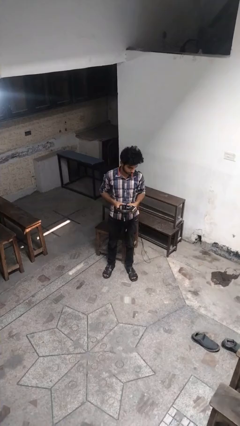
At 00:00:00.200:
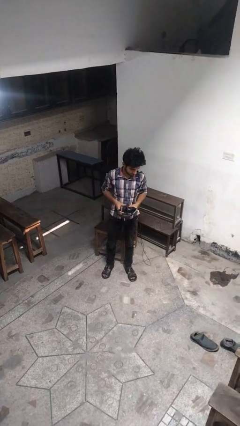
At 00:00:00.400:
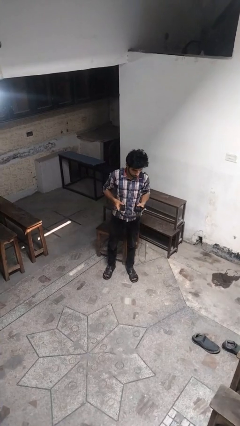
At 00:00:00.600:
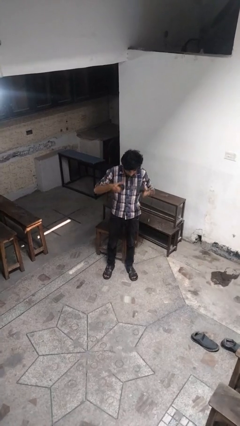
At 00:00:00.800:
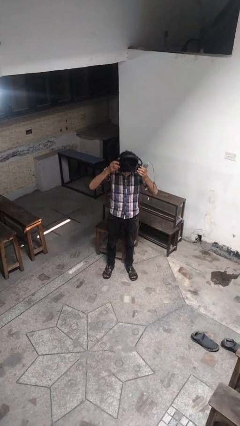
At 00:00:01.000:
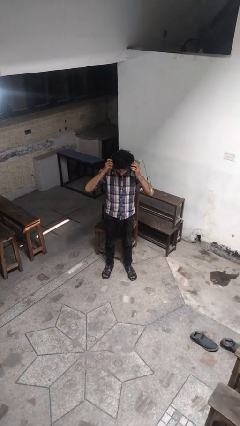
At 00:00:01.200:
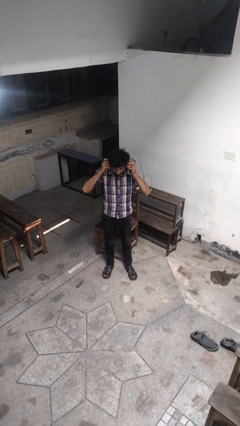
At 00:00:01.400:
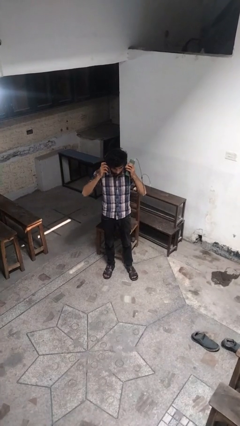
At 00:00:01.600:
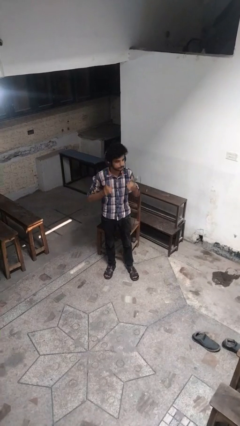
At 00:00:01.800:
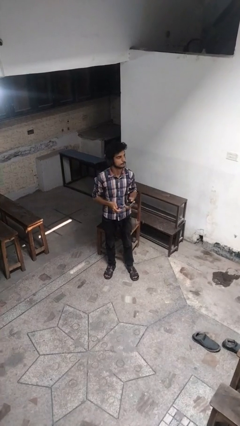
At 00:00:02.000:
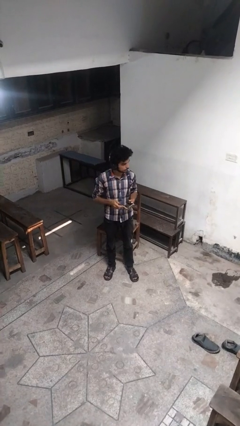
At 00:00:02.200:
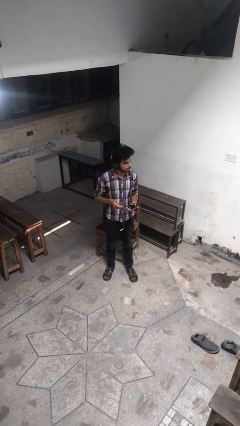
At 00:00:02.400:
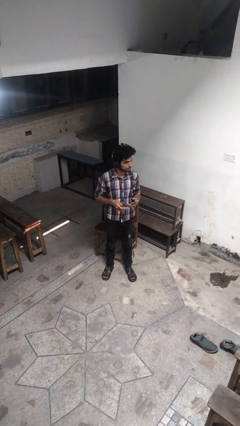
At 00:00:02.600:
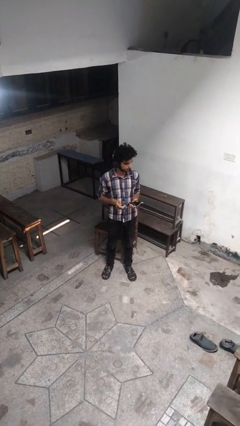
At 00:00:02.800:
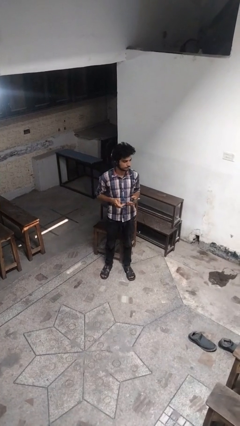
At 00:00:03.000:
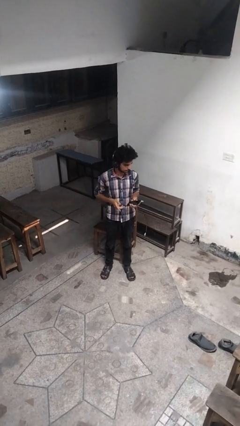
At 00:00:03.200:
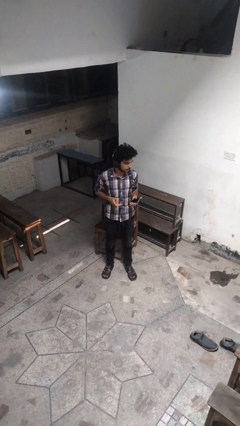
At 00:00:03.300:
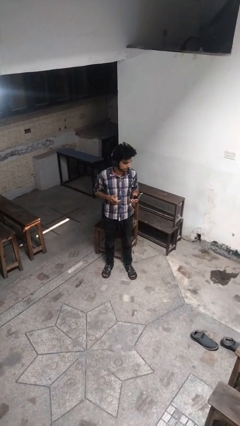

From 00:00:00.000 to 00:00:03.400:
person puts on headphones

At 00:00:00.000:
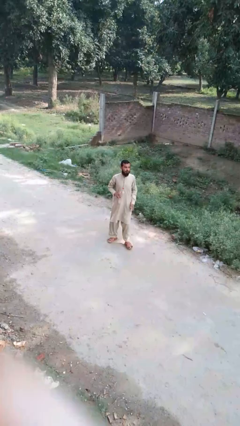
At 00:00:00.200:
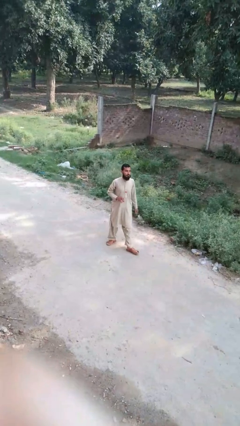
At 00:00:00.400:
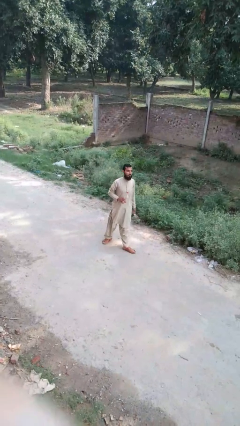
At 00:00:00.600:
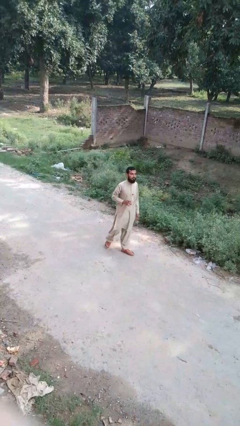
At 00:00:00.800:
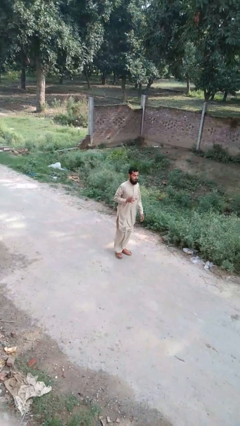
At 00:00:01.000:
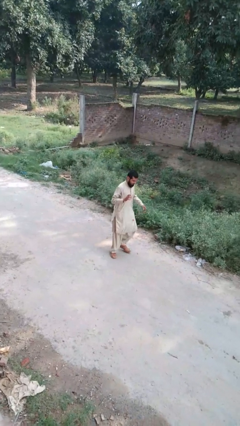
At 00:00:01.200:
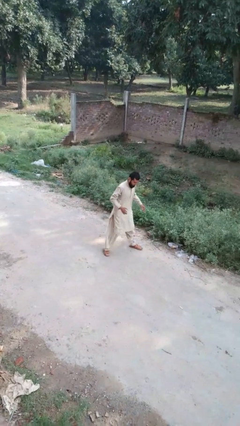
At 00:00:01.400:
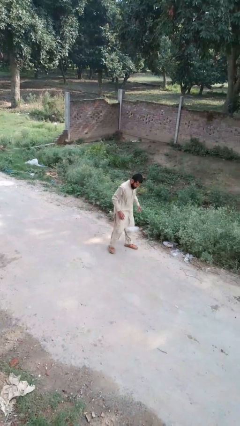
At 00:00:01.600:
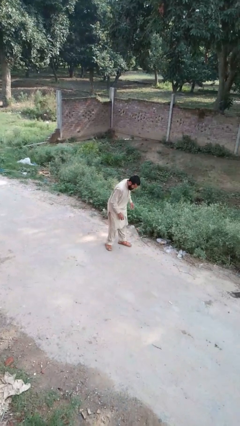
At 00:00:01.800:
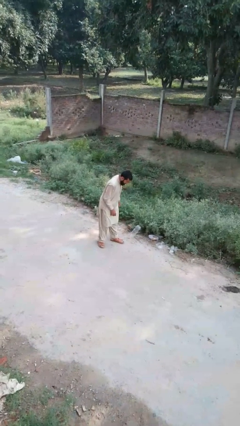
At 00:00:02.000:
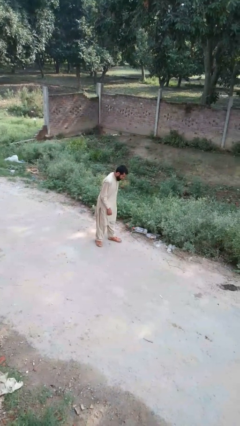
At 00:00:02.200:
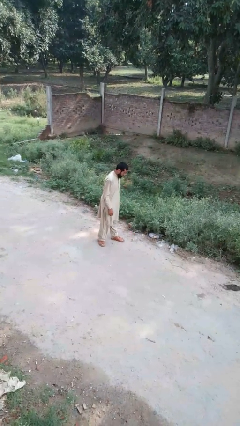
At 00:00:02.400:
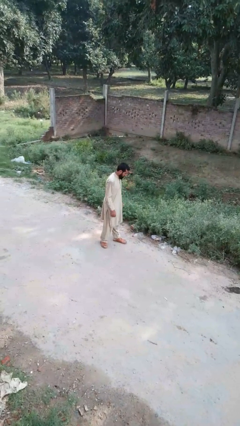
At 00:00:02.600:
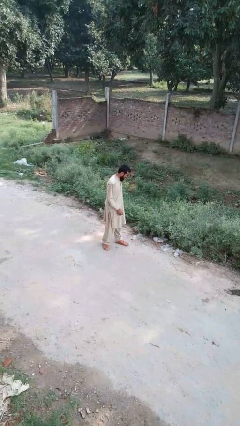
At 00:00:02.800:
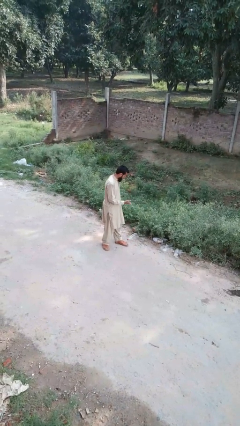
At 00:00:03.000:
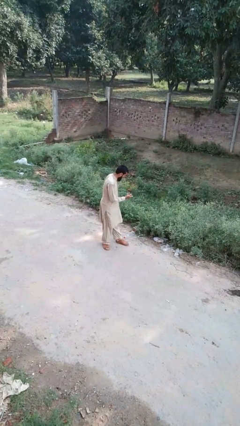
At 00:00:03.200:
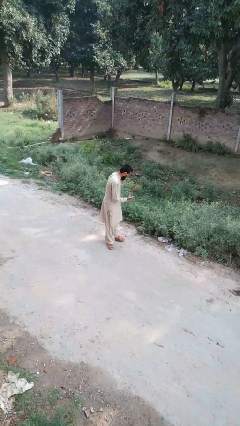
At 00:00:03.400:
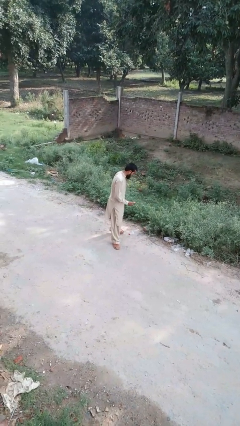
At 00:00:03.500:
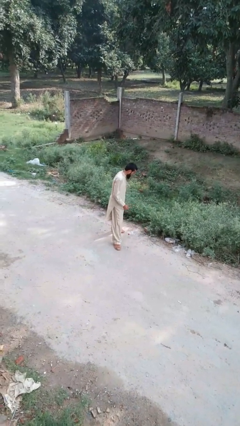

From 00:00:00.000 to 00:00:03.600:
person drops object

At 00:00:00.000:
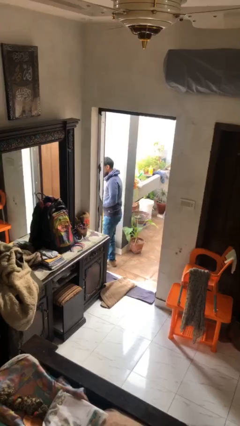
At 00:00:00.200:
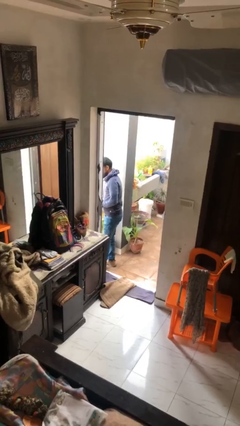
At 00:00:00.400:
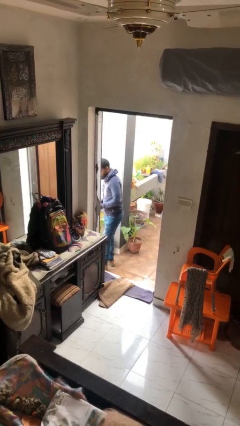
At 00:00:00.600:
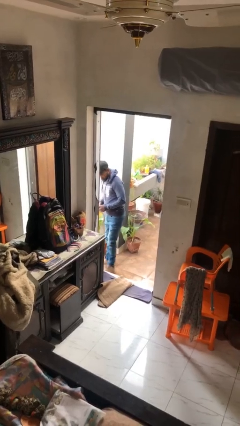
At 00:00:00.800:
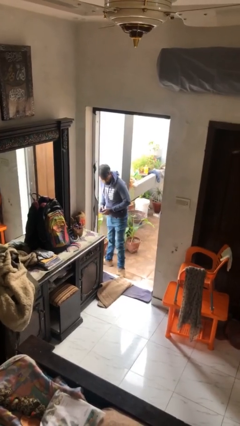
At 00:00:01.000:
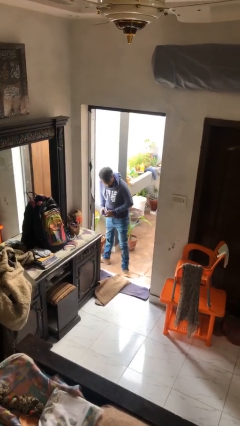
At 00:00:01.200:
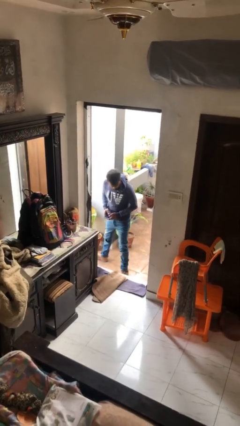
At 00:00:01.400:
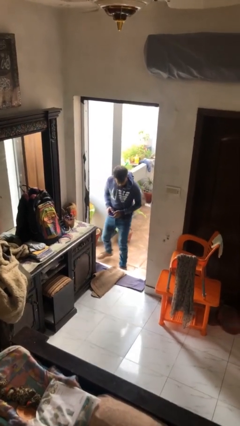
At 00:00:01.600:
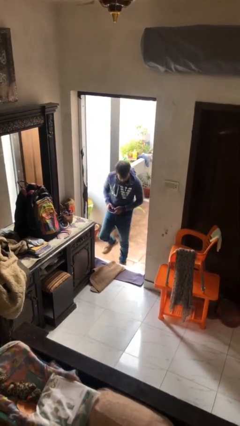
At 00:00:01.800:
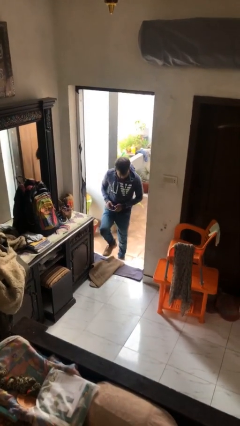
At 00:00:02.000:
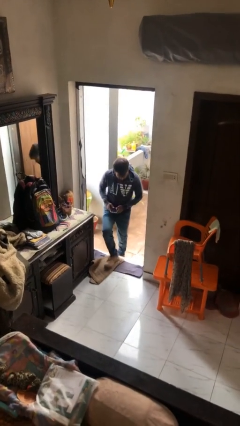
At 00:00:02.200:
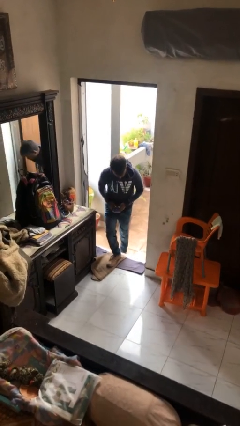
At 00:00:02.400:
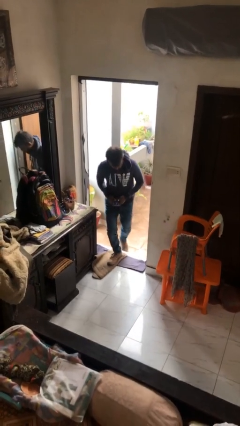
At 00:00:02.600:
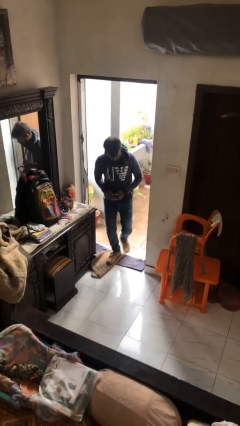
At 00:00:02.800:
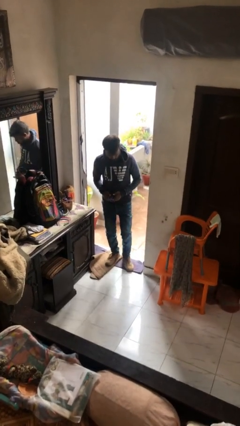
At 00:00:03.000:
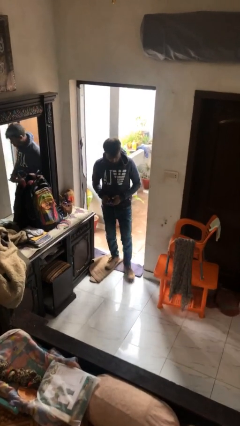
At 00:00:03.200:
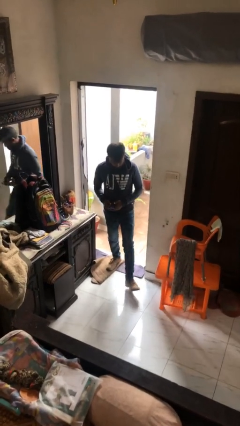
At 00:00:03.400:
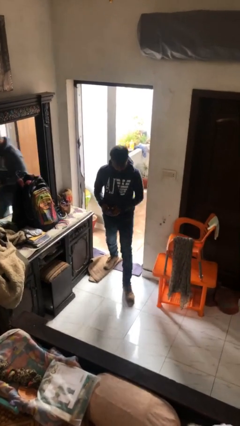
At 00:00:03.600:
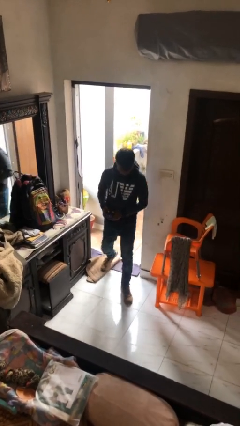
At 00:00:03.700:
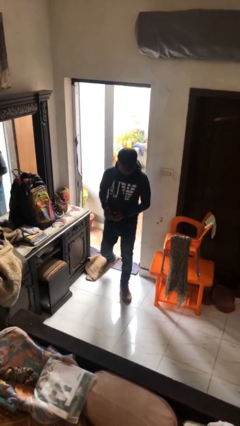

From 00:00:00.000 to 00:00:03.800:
person enters scene through structure

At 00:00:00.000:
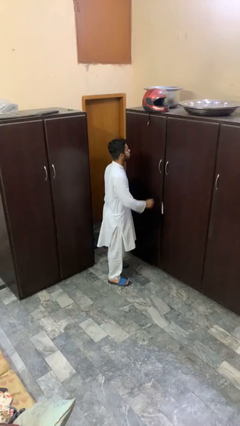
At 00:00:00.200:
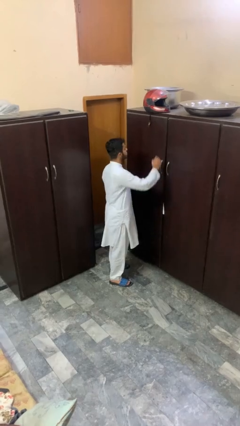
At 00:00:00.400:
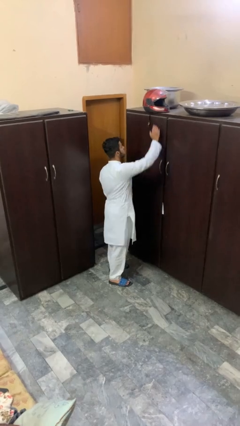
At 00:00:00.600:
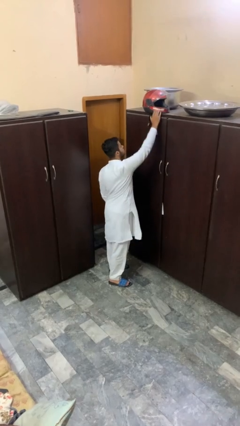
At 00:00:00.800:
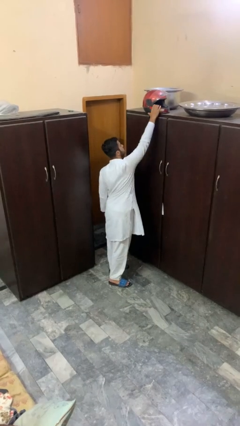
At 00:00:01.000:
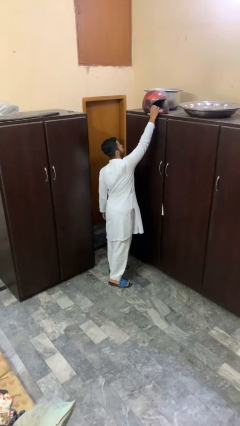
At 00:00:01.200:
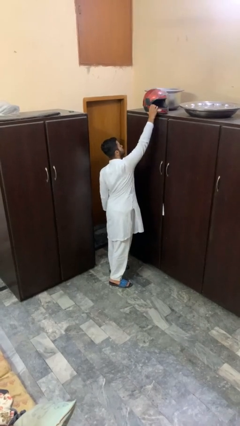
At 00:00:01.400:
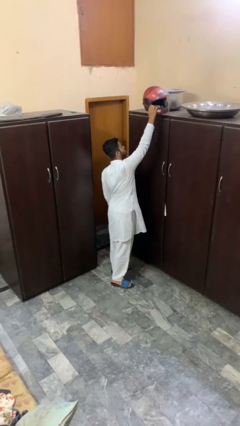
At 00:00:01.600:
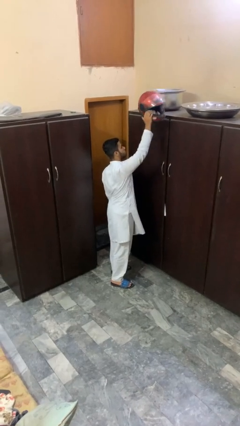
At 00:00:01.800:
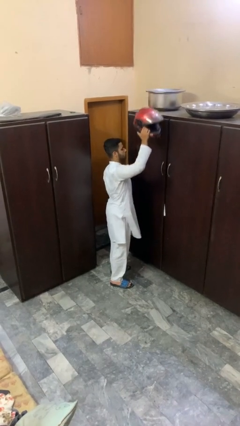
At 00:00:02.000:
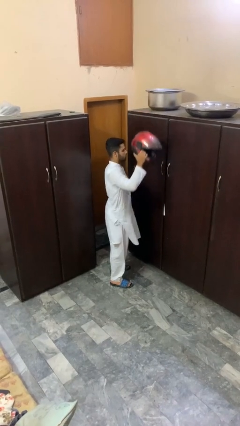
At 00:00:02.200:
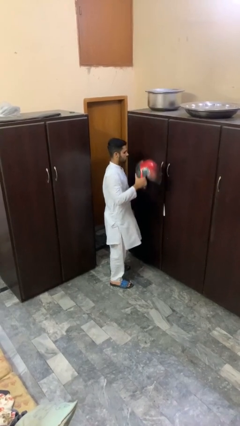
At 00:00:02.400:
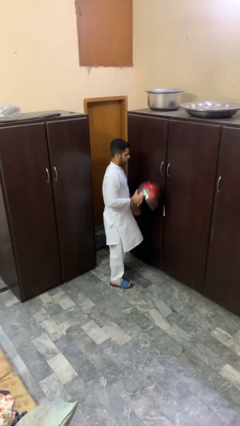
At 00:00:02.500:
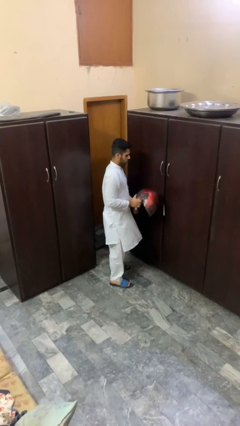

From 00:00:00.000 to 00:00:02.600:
person picks up object from shelf

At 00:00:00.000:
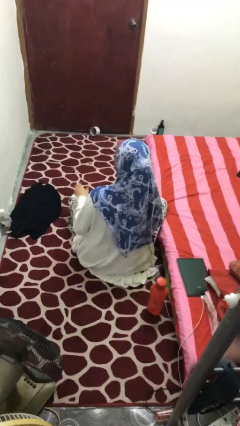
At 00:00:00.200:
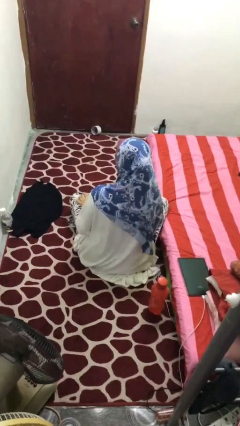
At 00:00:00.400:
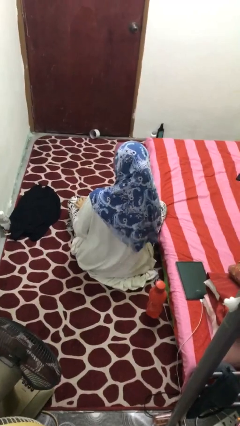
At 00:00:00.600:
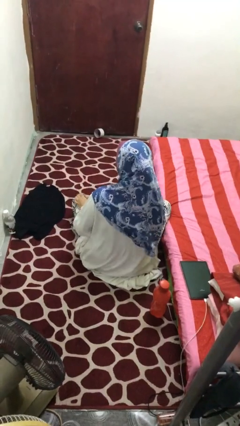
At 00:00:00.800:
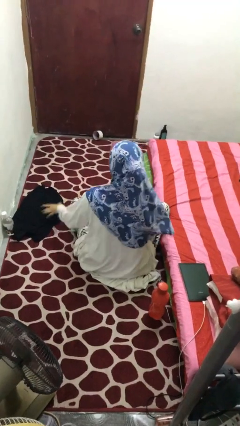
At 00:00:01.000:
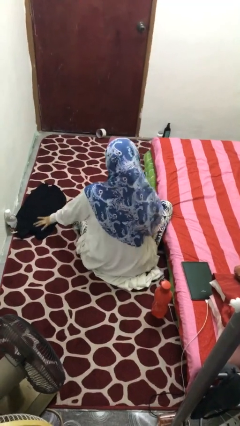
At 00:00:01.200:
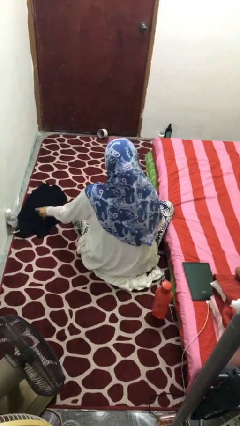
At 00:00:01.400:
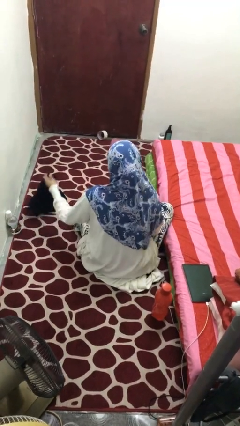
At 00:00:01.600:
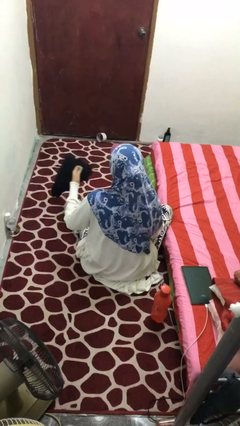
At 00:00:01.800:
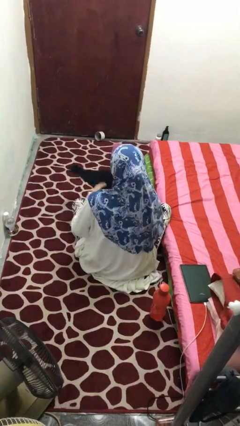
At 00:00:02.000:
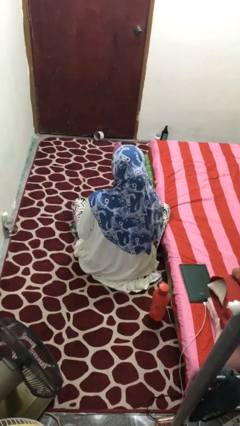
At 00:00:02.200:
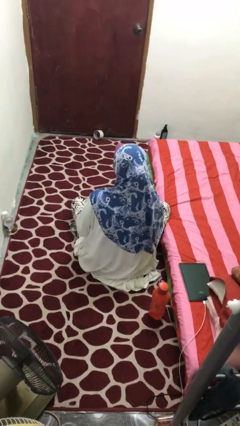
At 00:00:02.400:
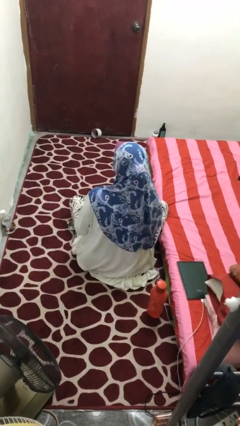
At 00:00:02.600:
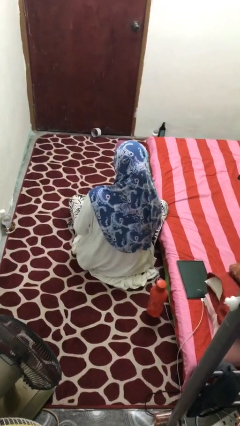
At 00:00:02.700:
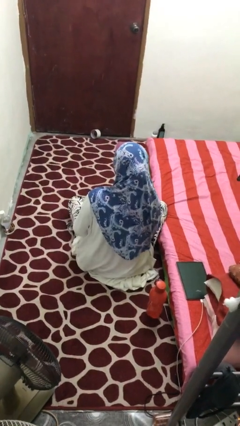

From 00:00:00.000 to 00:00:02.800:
person picks up object from floor

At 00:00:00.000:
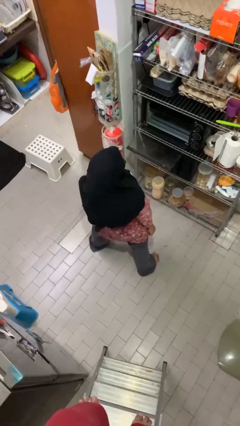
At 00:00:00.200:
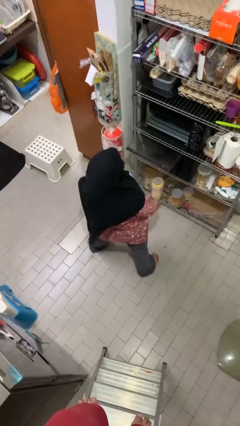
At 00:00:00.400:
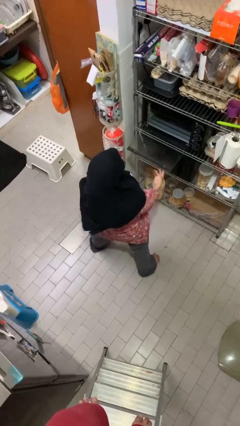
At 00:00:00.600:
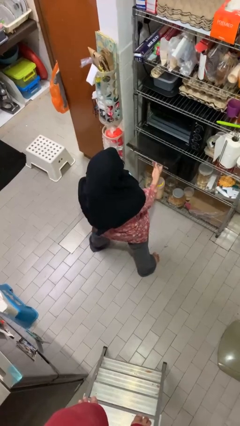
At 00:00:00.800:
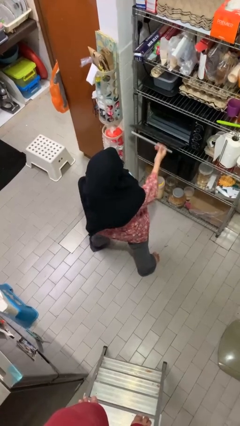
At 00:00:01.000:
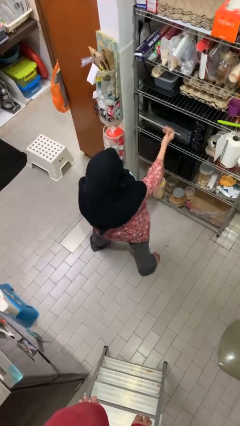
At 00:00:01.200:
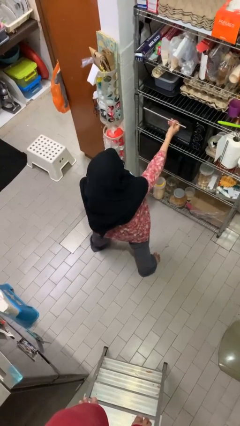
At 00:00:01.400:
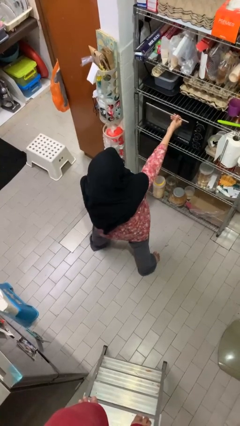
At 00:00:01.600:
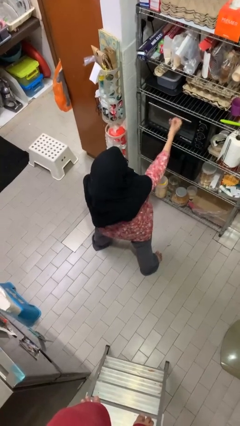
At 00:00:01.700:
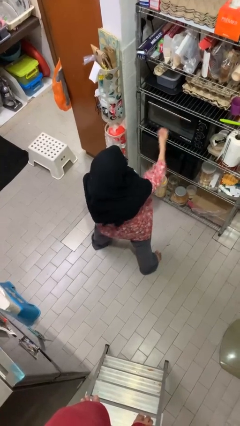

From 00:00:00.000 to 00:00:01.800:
person closes oven door
